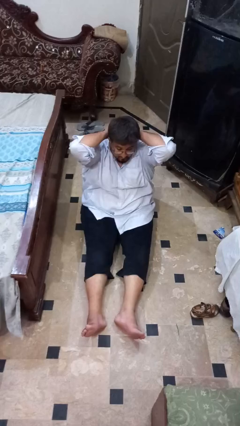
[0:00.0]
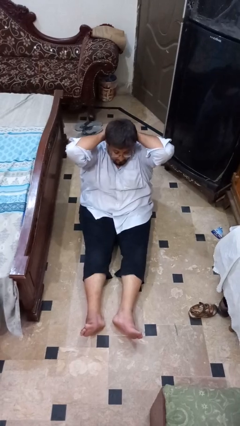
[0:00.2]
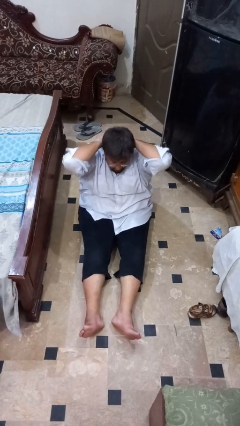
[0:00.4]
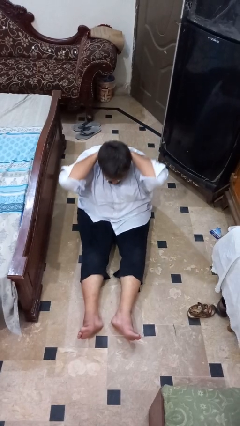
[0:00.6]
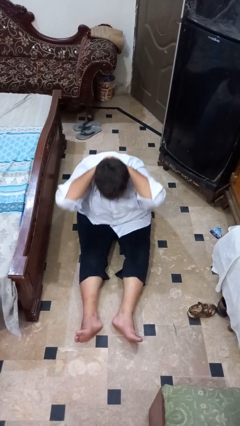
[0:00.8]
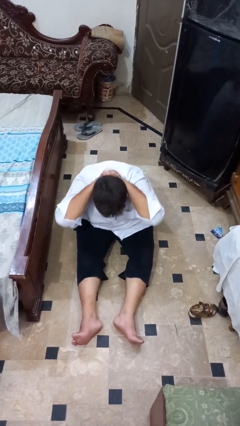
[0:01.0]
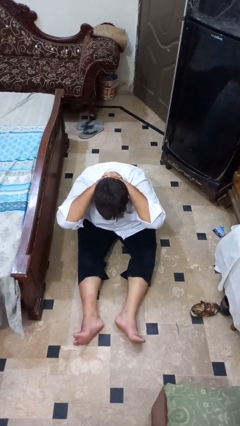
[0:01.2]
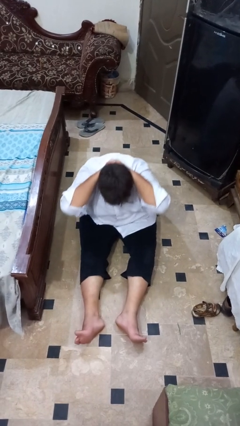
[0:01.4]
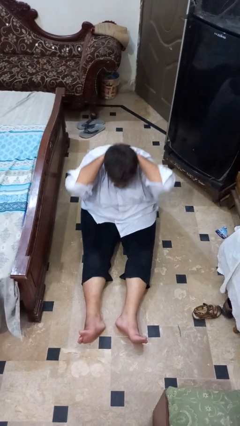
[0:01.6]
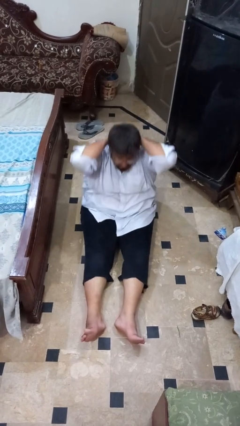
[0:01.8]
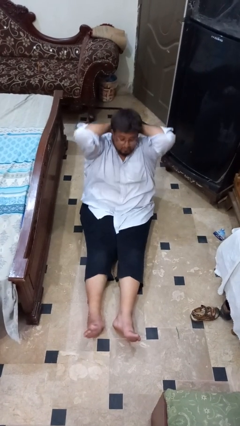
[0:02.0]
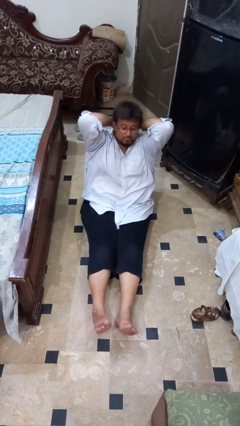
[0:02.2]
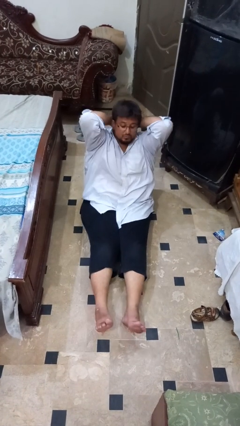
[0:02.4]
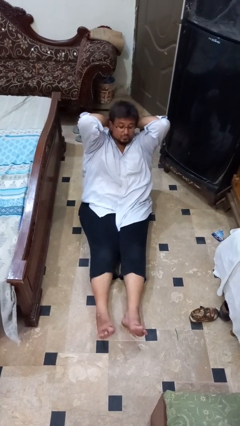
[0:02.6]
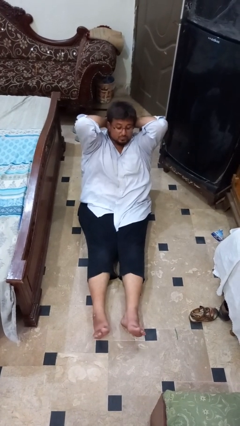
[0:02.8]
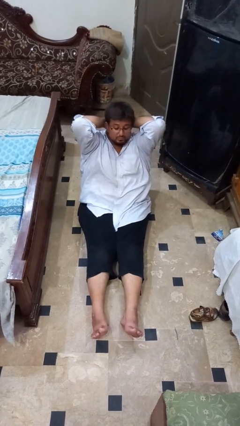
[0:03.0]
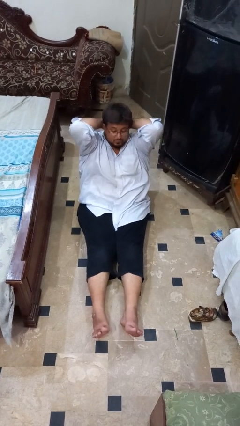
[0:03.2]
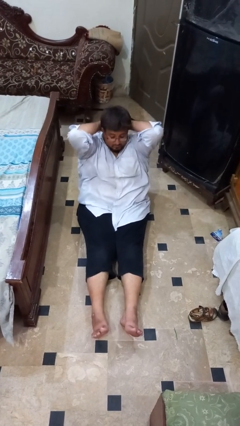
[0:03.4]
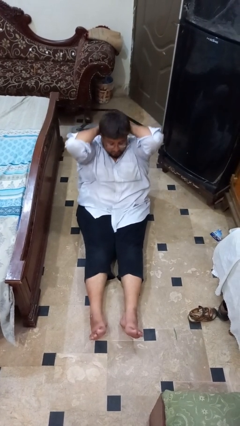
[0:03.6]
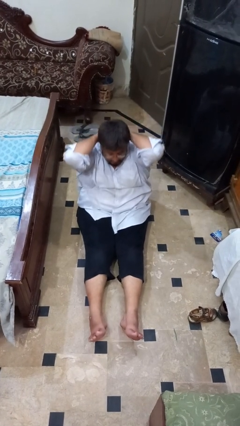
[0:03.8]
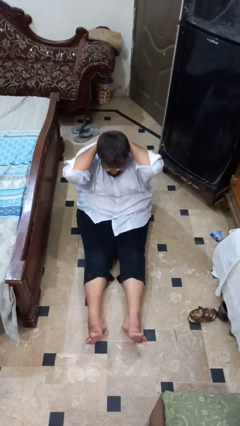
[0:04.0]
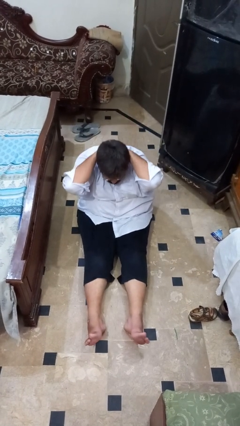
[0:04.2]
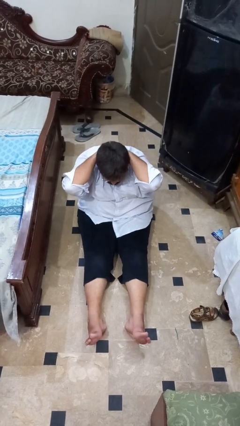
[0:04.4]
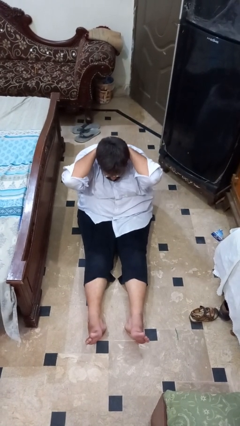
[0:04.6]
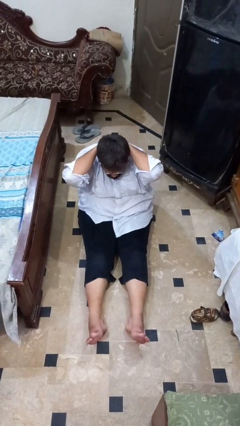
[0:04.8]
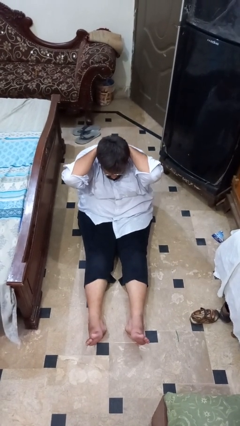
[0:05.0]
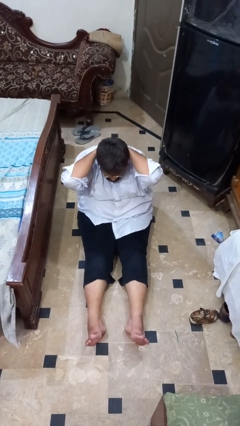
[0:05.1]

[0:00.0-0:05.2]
person exercises with situp

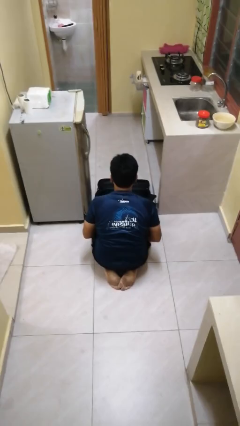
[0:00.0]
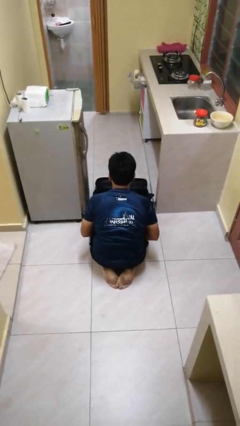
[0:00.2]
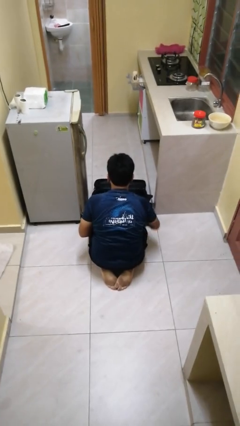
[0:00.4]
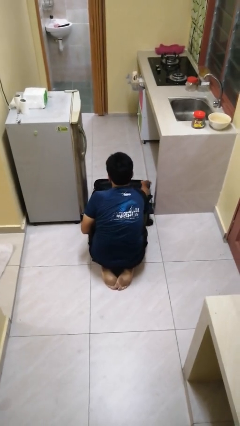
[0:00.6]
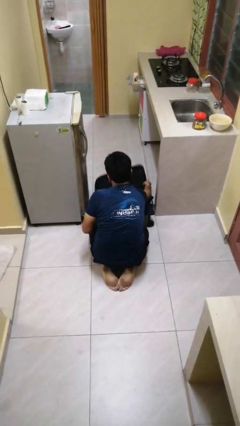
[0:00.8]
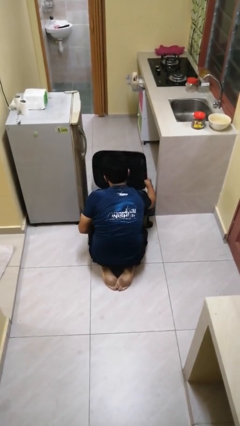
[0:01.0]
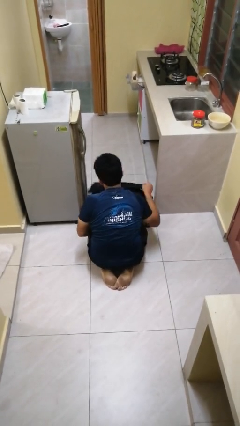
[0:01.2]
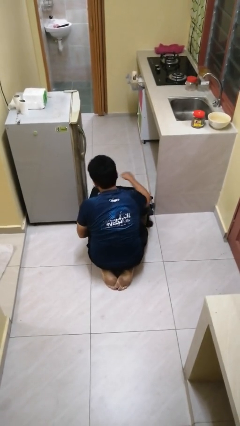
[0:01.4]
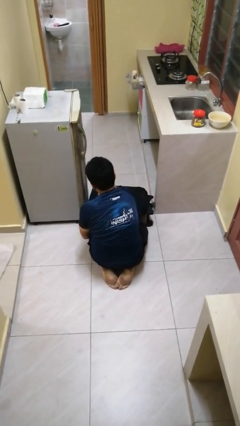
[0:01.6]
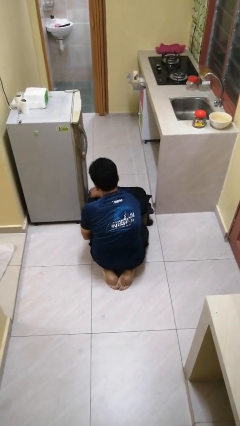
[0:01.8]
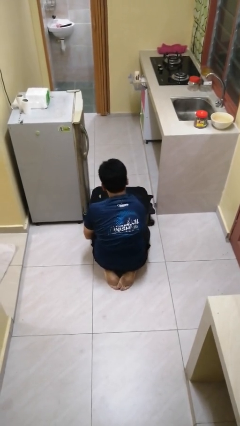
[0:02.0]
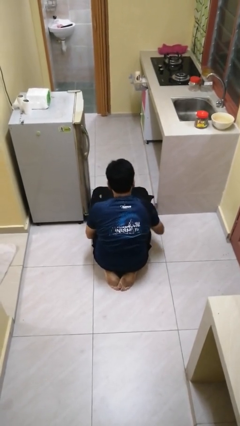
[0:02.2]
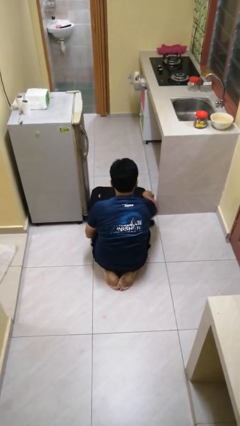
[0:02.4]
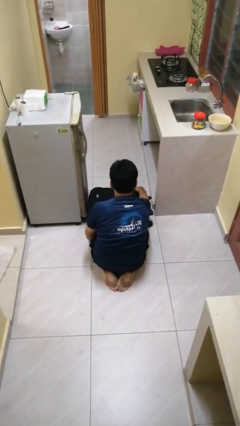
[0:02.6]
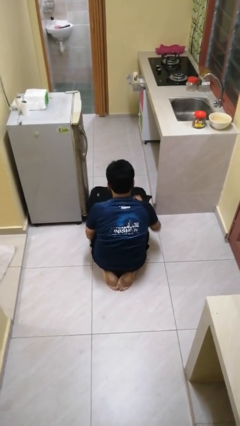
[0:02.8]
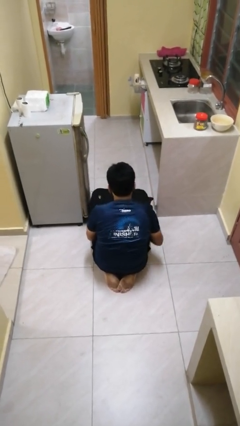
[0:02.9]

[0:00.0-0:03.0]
person closes suitcase

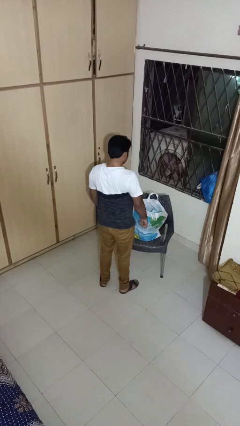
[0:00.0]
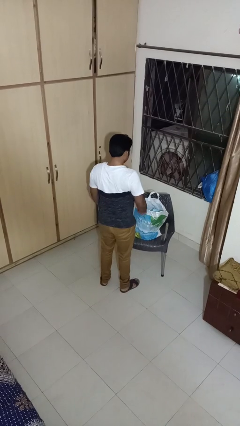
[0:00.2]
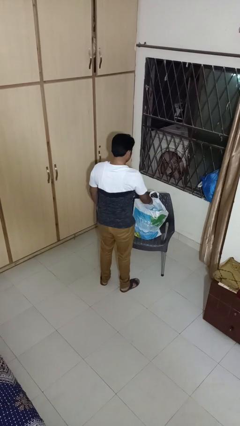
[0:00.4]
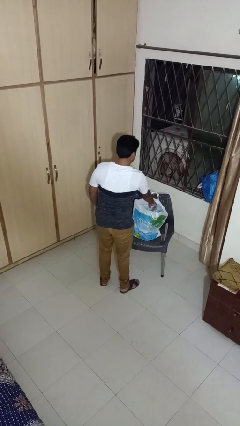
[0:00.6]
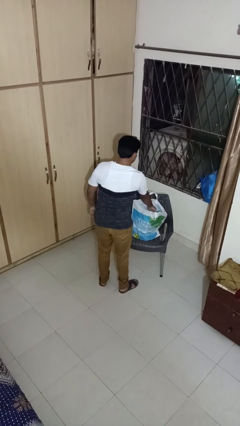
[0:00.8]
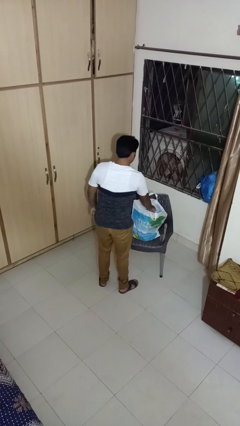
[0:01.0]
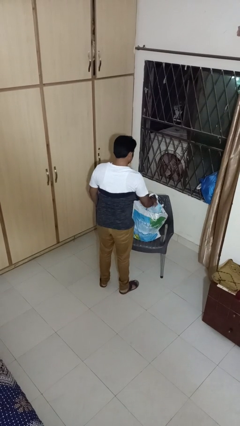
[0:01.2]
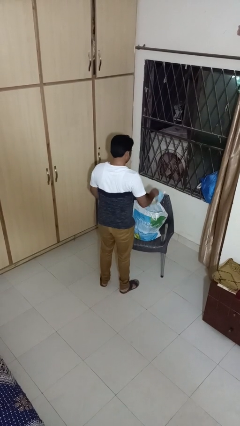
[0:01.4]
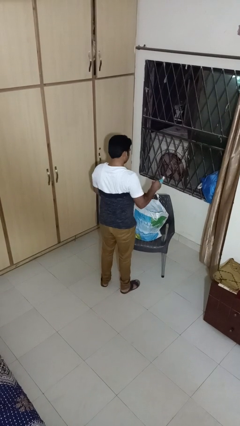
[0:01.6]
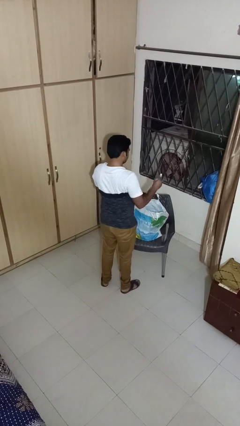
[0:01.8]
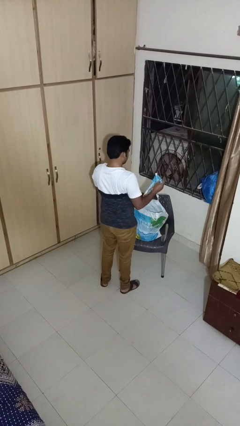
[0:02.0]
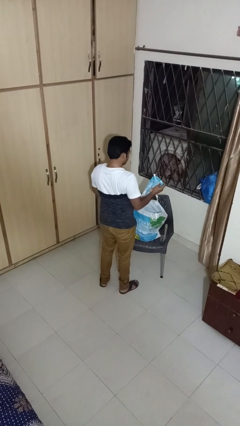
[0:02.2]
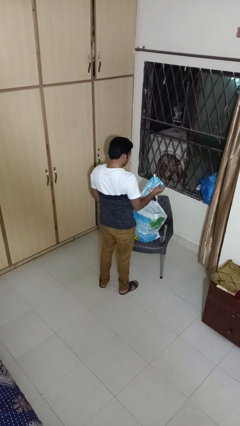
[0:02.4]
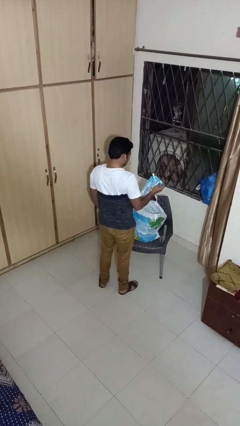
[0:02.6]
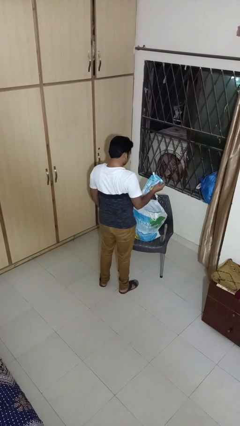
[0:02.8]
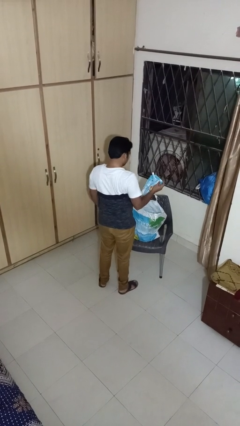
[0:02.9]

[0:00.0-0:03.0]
person takes object from bag

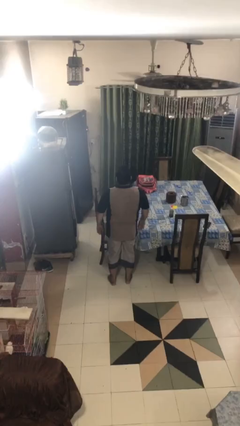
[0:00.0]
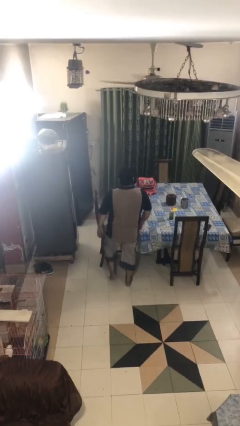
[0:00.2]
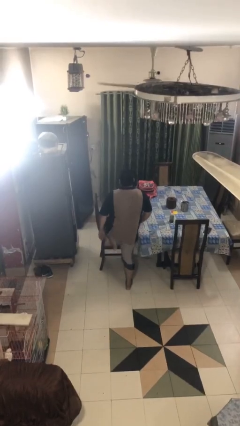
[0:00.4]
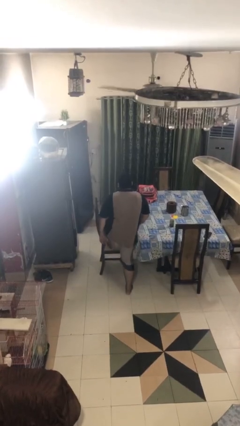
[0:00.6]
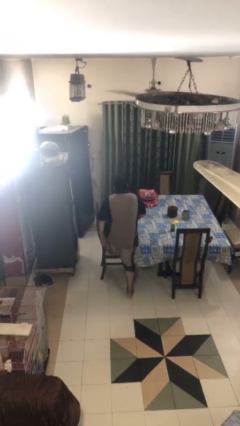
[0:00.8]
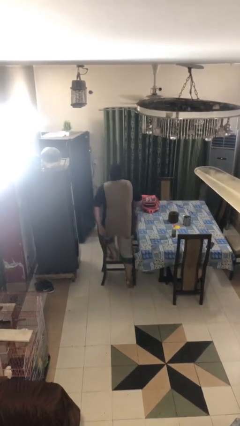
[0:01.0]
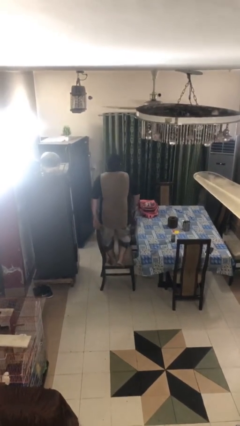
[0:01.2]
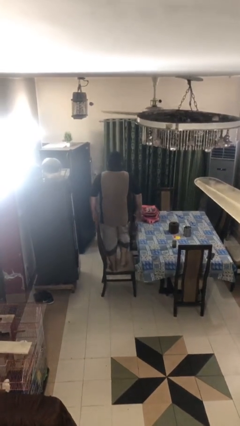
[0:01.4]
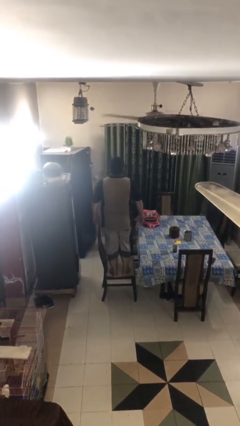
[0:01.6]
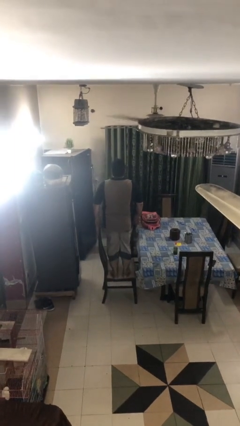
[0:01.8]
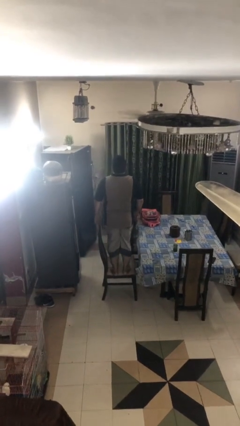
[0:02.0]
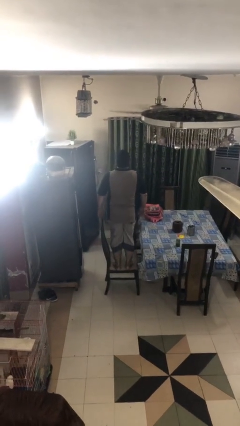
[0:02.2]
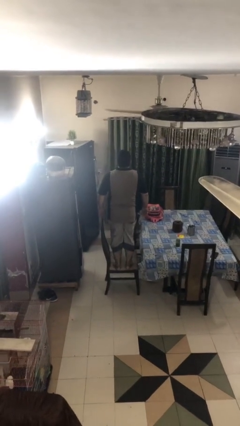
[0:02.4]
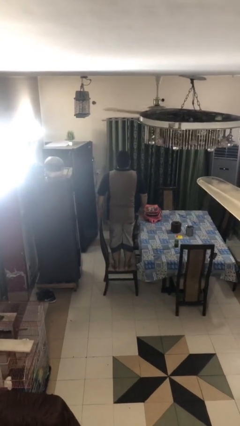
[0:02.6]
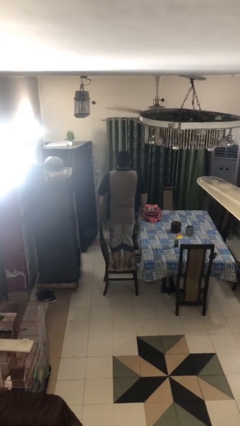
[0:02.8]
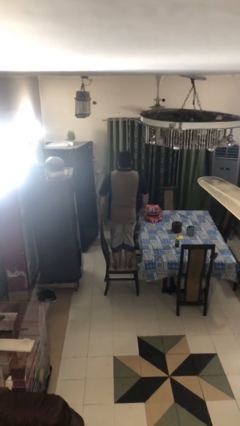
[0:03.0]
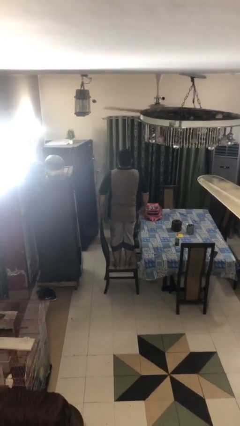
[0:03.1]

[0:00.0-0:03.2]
person climbs on chair

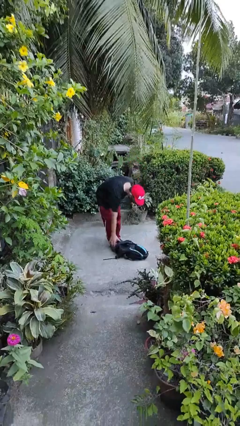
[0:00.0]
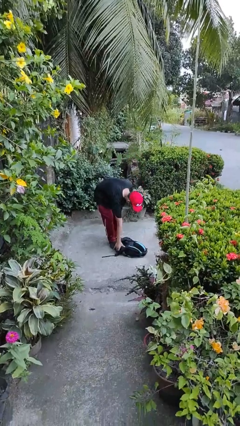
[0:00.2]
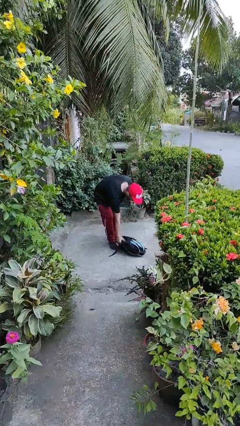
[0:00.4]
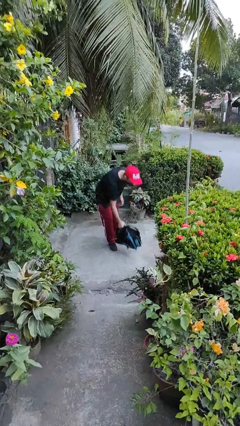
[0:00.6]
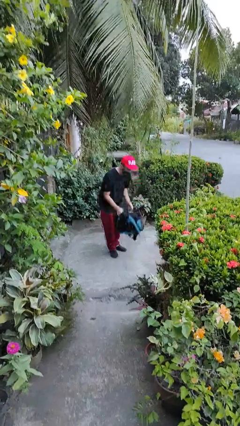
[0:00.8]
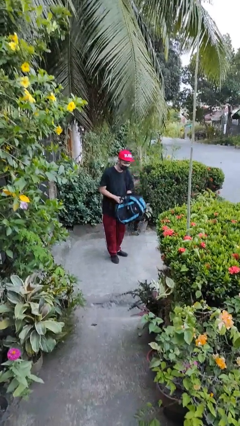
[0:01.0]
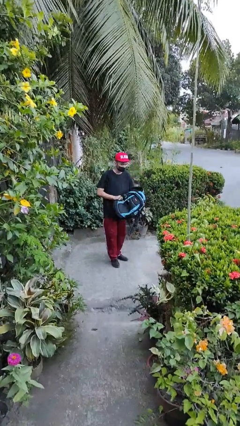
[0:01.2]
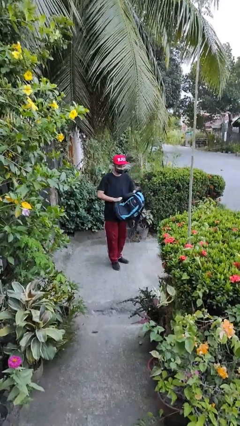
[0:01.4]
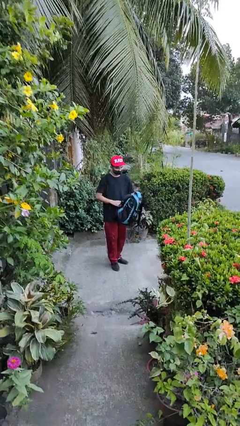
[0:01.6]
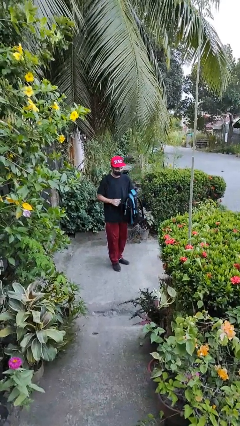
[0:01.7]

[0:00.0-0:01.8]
person picks up object from floor

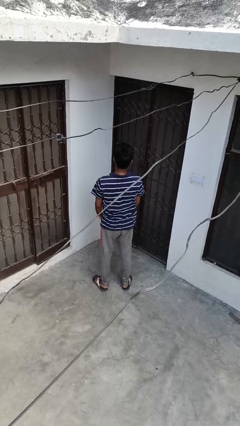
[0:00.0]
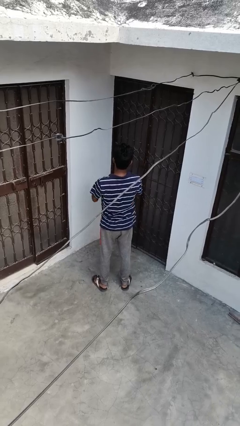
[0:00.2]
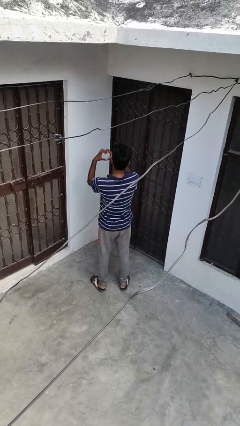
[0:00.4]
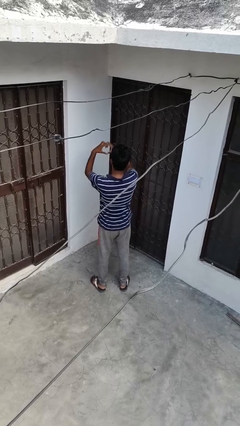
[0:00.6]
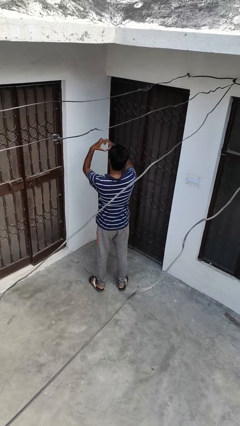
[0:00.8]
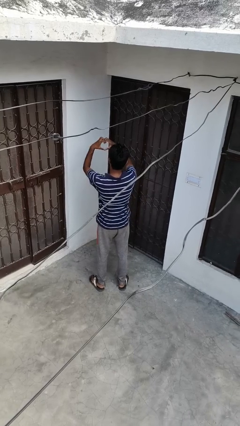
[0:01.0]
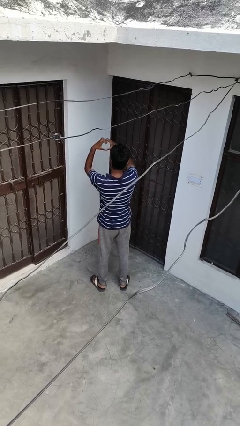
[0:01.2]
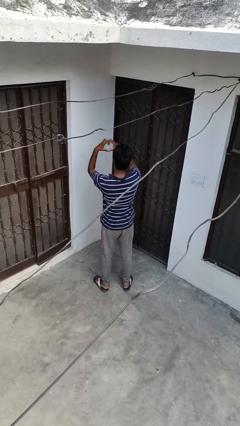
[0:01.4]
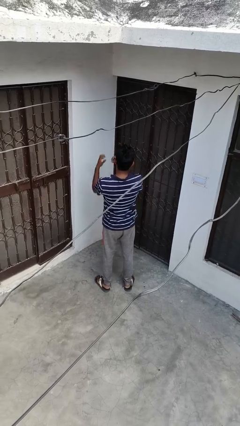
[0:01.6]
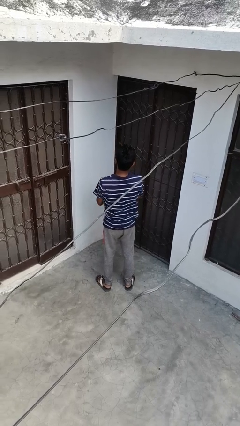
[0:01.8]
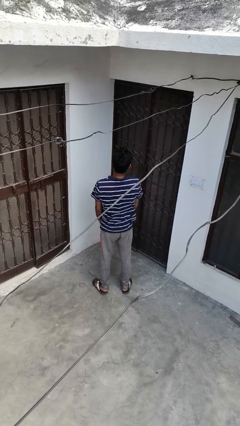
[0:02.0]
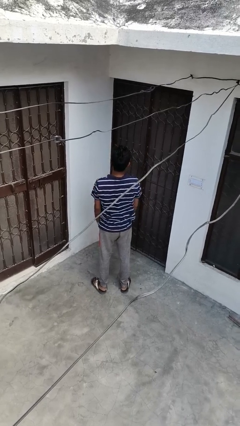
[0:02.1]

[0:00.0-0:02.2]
person gestures heart
